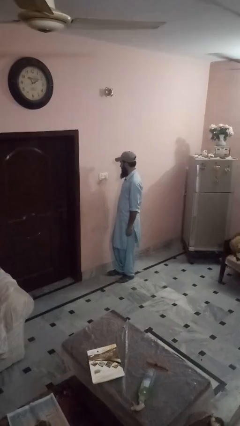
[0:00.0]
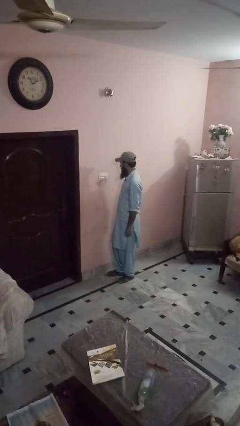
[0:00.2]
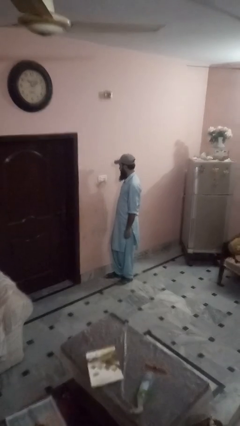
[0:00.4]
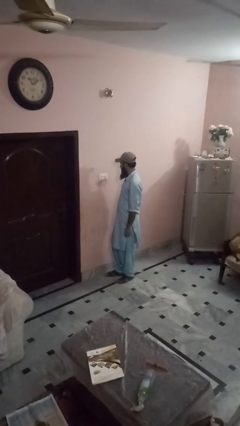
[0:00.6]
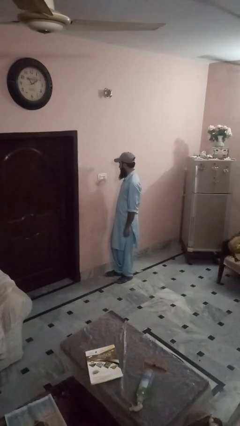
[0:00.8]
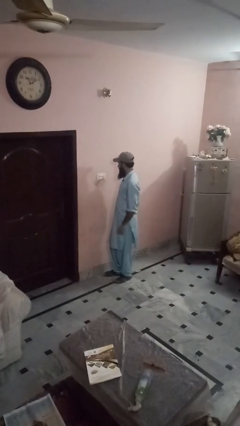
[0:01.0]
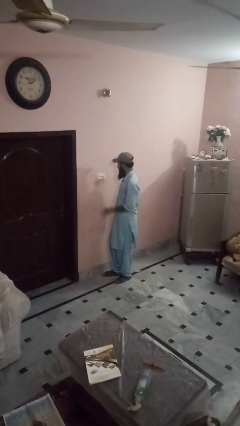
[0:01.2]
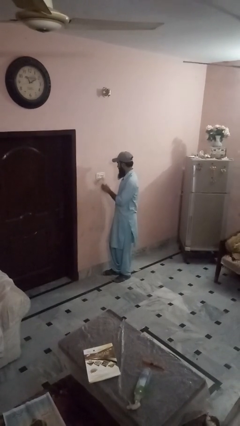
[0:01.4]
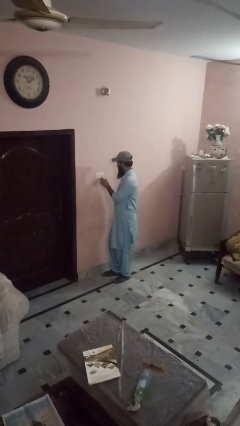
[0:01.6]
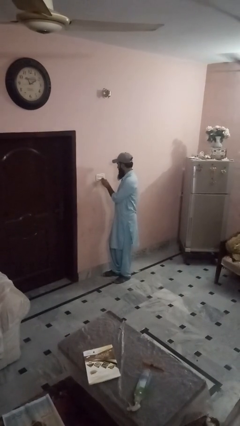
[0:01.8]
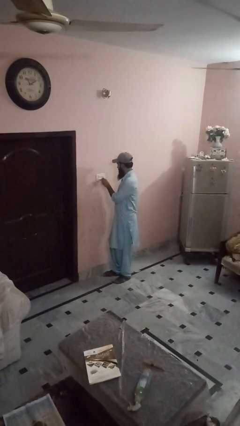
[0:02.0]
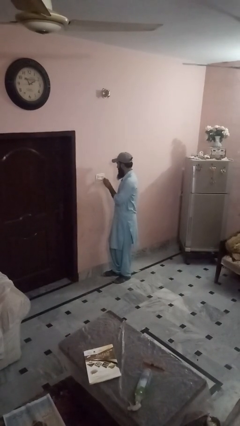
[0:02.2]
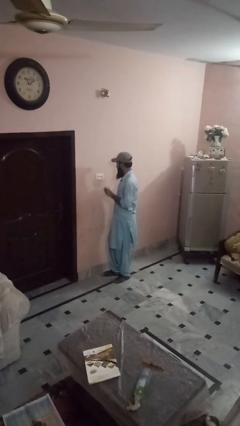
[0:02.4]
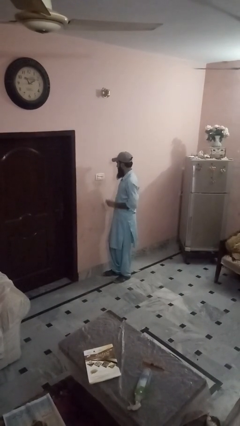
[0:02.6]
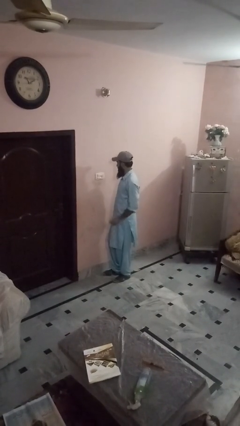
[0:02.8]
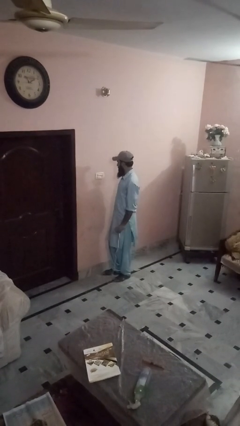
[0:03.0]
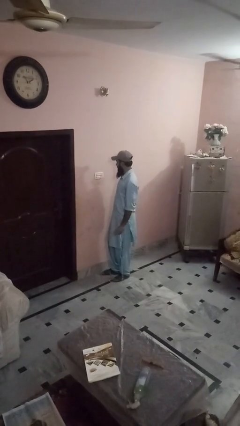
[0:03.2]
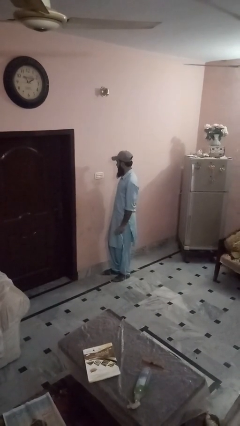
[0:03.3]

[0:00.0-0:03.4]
person unplugs from electrical socket

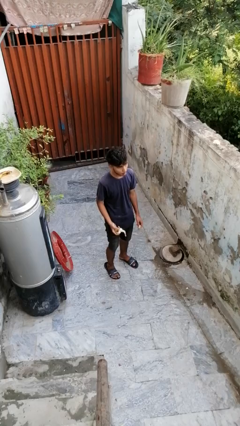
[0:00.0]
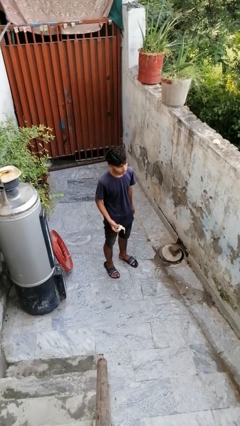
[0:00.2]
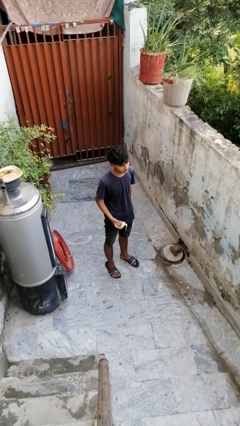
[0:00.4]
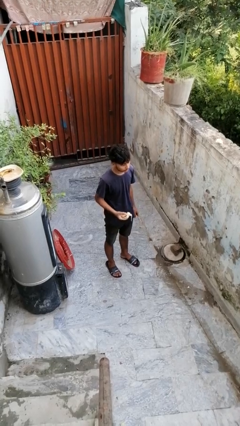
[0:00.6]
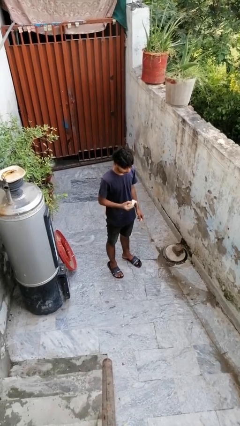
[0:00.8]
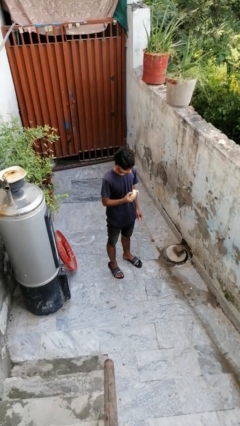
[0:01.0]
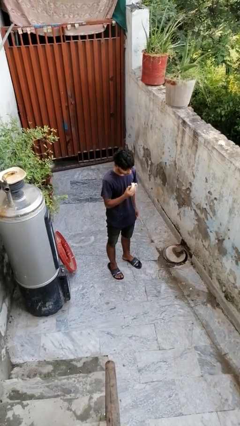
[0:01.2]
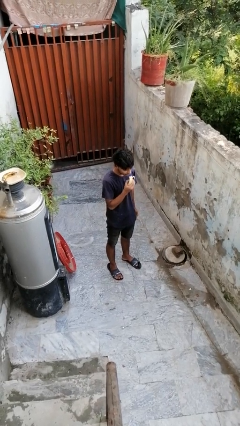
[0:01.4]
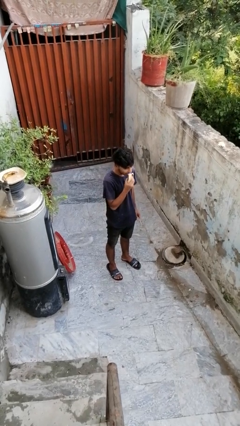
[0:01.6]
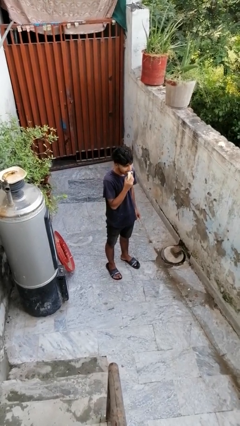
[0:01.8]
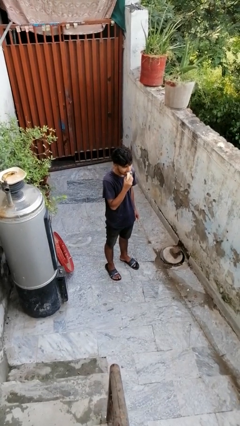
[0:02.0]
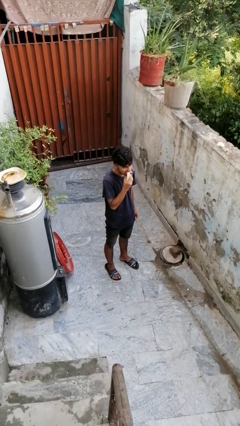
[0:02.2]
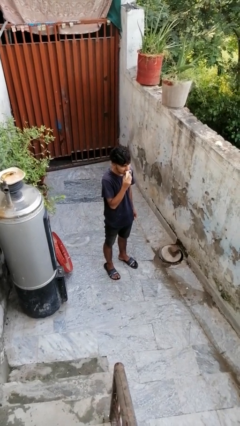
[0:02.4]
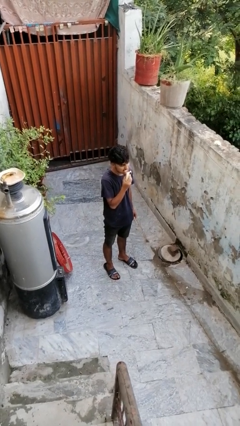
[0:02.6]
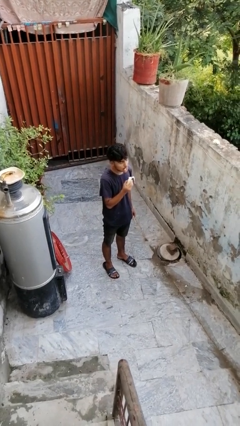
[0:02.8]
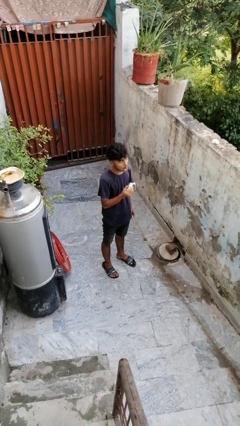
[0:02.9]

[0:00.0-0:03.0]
person eats banana

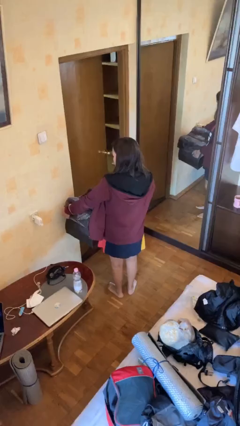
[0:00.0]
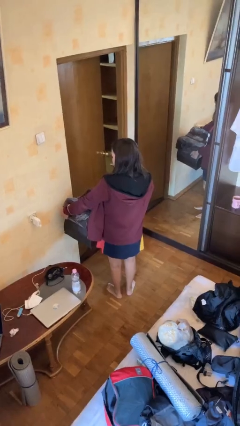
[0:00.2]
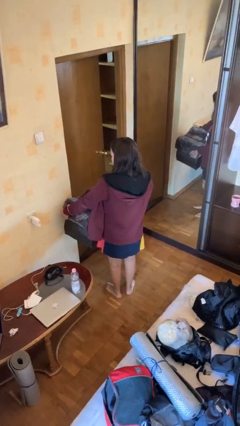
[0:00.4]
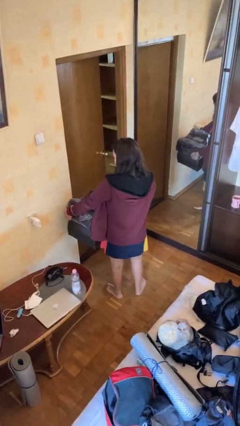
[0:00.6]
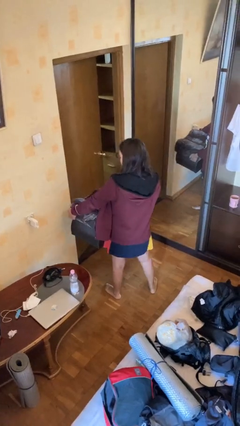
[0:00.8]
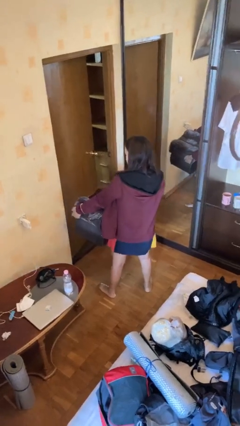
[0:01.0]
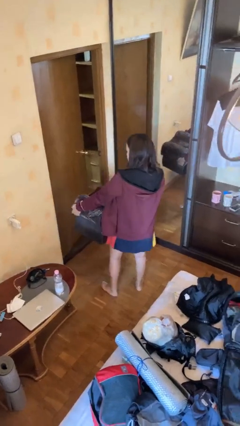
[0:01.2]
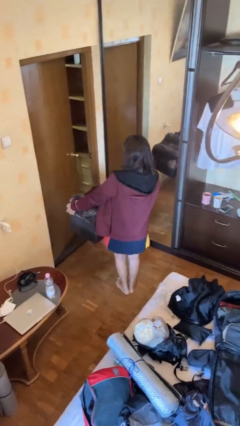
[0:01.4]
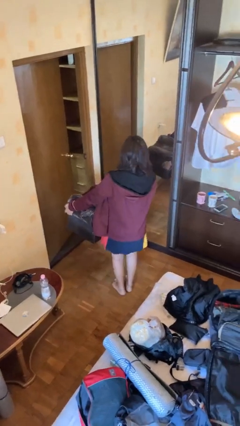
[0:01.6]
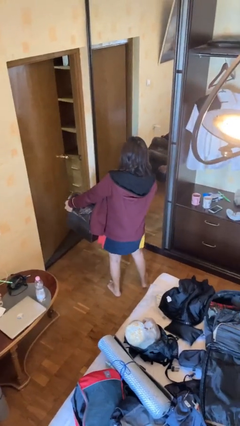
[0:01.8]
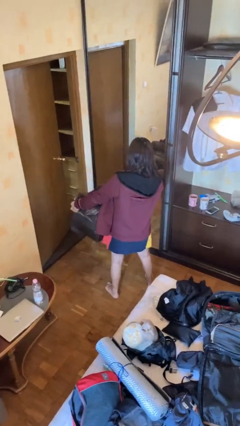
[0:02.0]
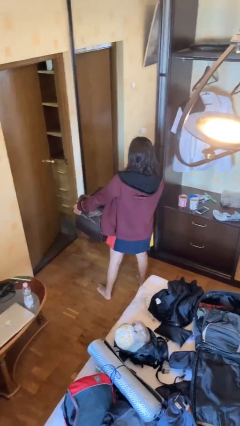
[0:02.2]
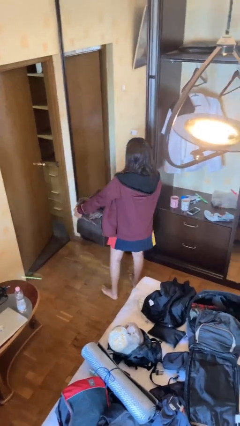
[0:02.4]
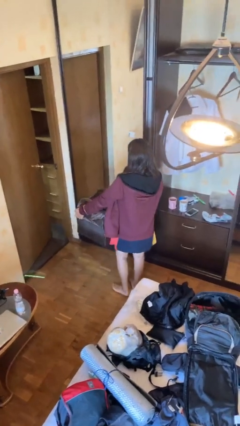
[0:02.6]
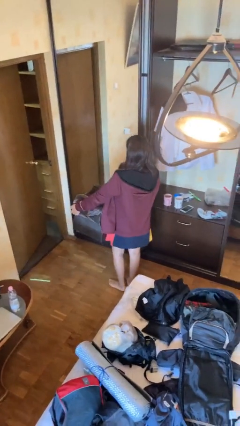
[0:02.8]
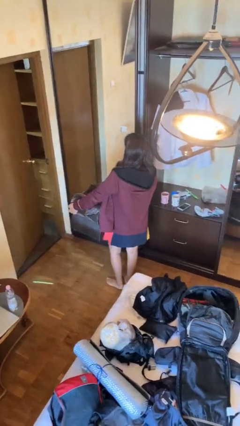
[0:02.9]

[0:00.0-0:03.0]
person carries furniture

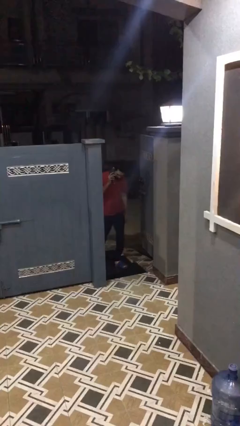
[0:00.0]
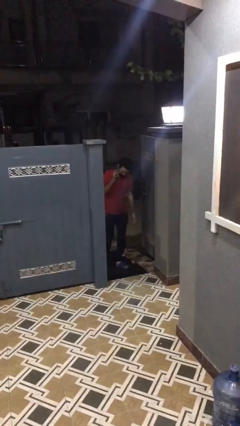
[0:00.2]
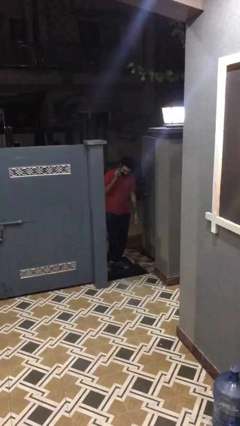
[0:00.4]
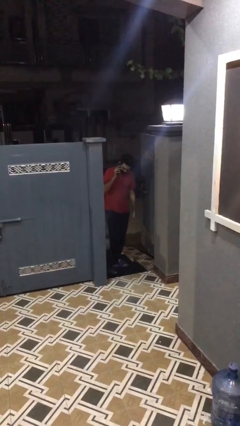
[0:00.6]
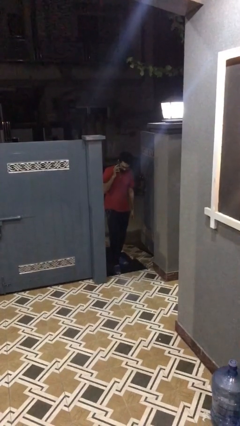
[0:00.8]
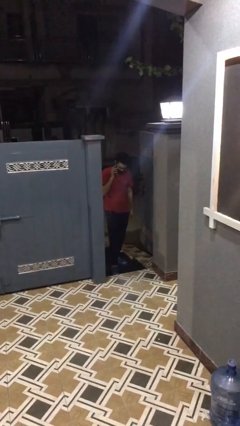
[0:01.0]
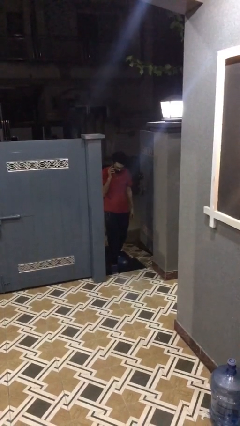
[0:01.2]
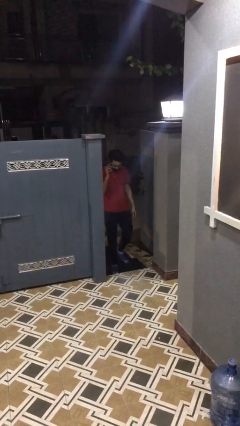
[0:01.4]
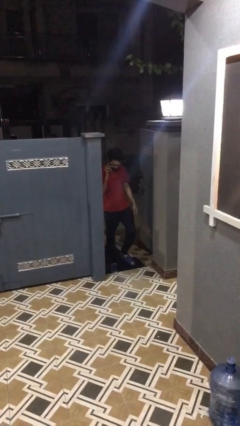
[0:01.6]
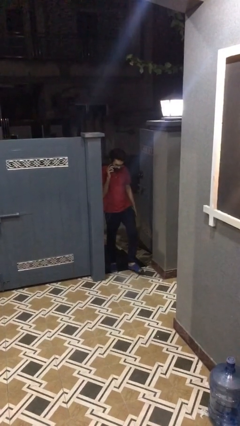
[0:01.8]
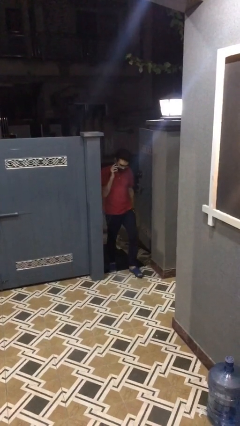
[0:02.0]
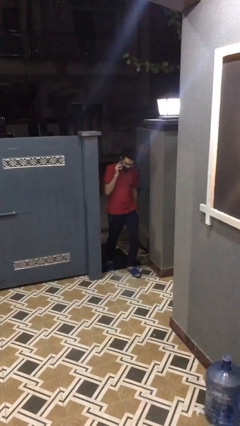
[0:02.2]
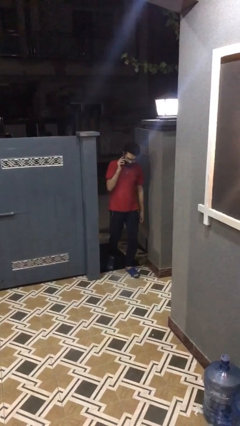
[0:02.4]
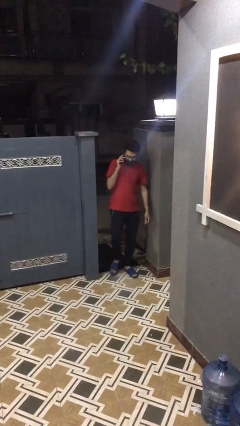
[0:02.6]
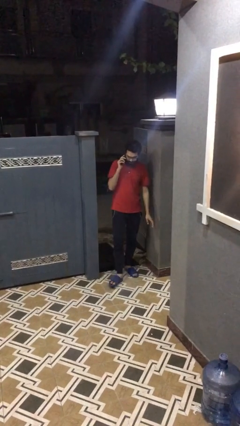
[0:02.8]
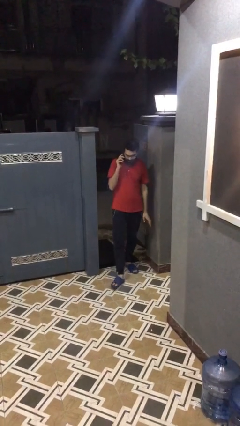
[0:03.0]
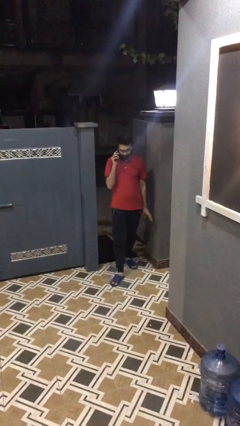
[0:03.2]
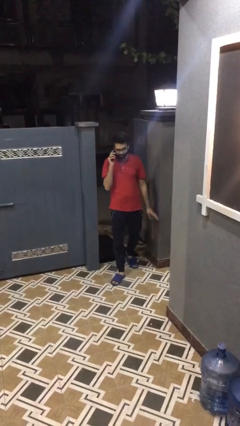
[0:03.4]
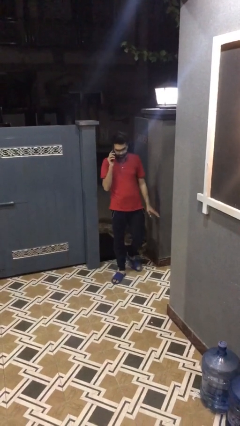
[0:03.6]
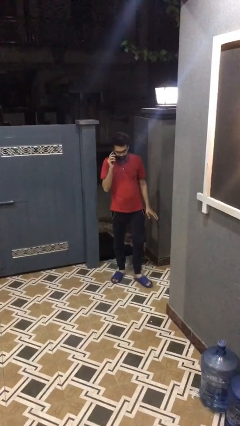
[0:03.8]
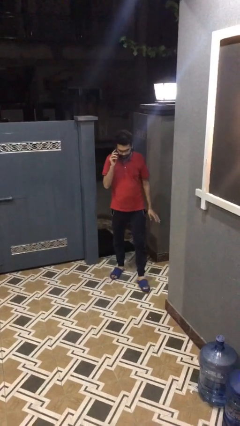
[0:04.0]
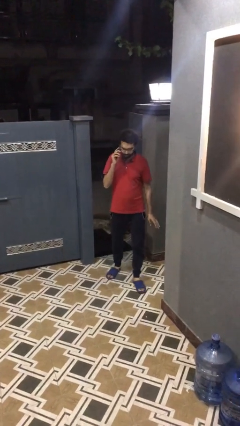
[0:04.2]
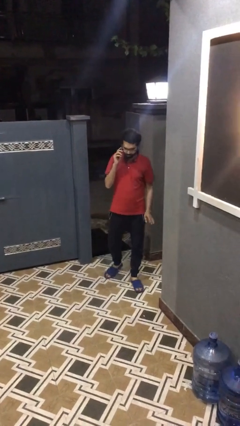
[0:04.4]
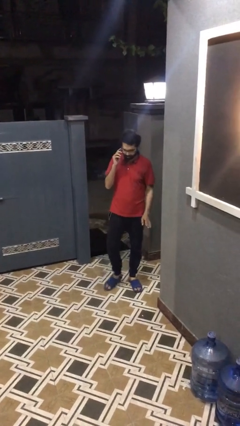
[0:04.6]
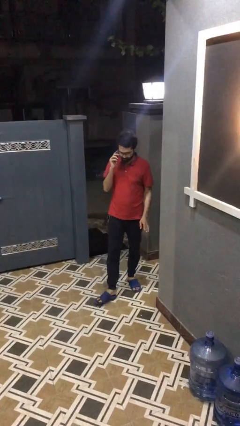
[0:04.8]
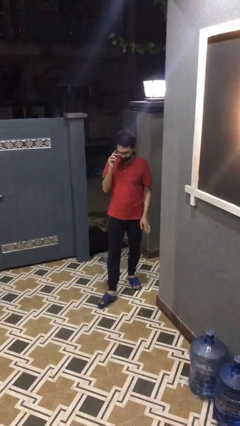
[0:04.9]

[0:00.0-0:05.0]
person enters scene through structure

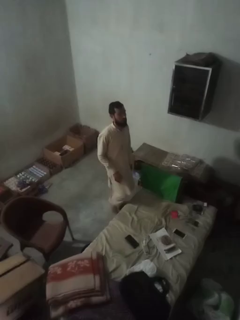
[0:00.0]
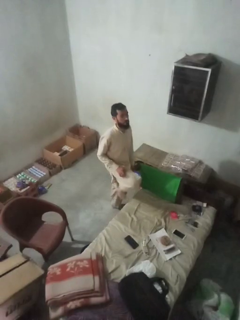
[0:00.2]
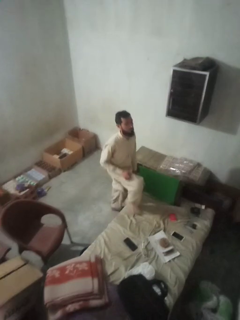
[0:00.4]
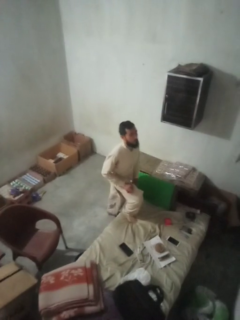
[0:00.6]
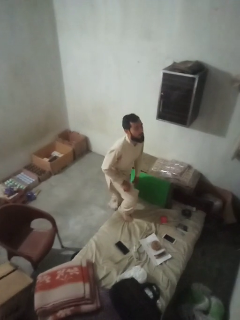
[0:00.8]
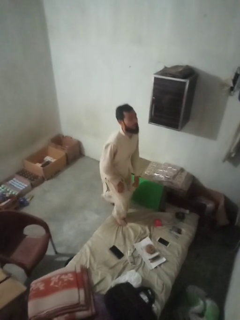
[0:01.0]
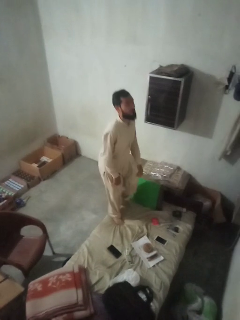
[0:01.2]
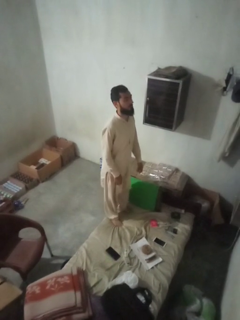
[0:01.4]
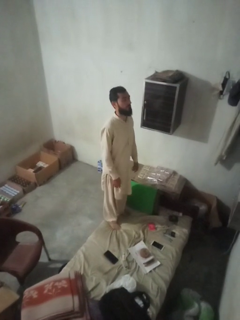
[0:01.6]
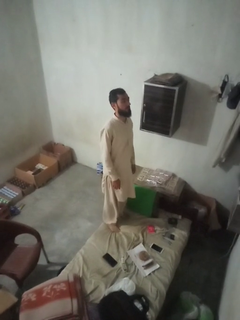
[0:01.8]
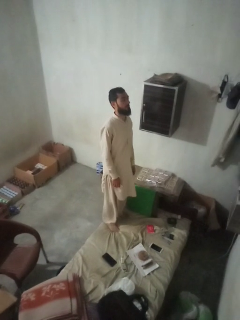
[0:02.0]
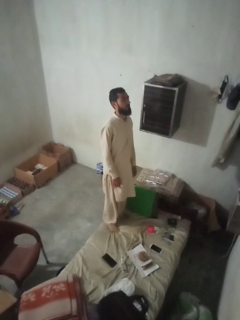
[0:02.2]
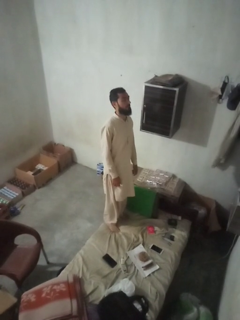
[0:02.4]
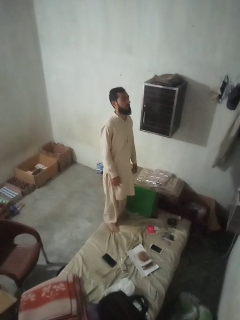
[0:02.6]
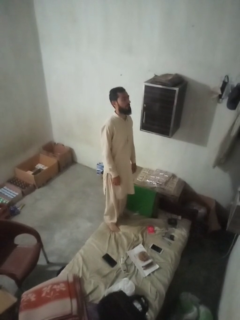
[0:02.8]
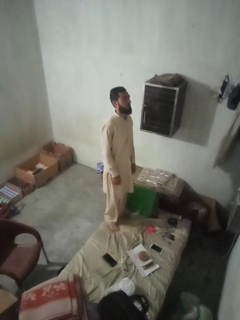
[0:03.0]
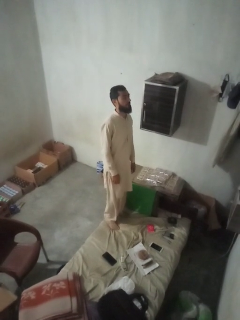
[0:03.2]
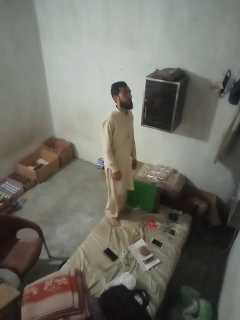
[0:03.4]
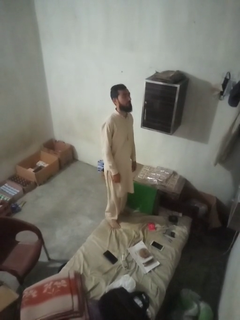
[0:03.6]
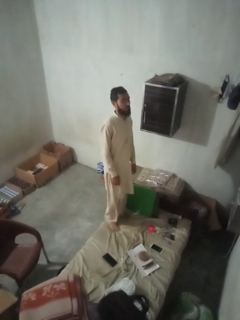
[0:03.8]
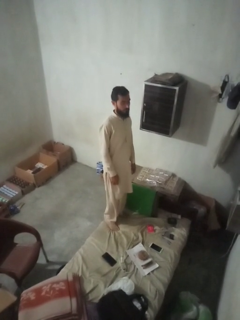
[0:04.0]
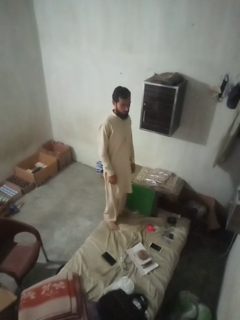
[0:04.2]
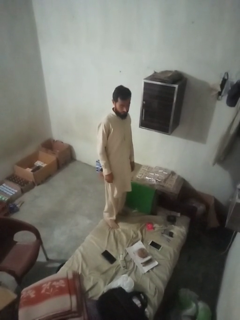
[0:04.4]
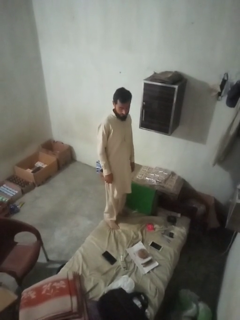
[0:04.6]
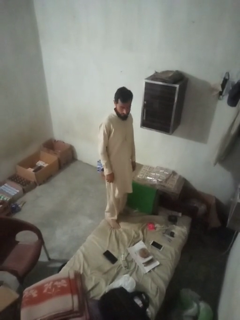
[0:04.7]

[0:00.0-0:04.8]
person climbs on couch
